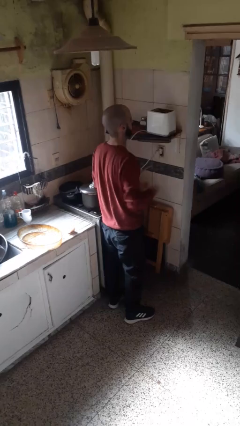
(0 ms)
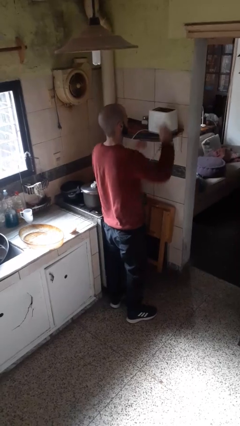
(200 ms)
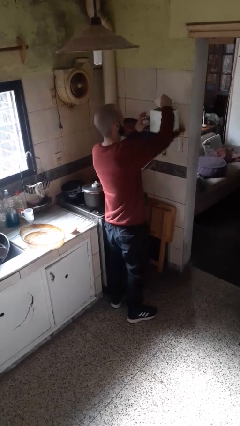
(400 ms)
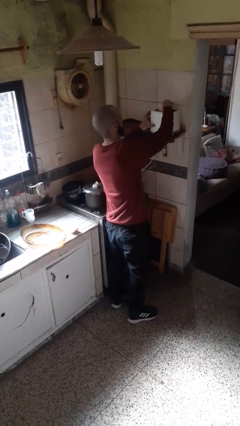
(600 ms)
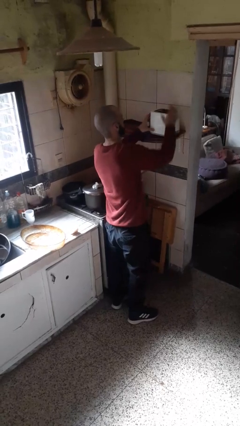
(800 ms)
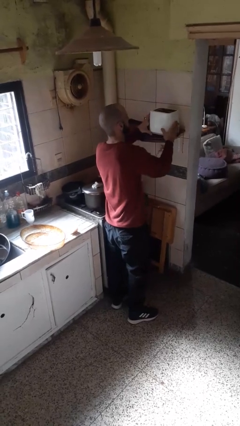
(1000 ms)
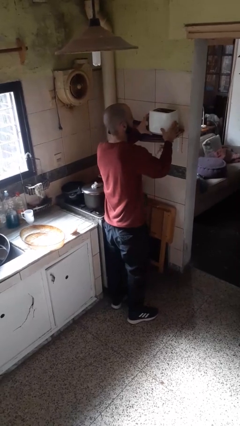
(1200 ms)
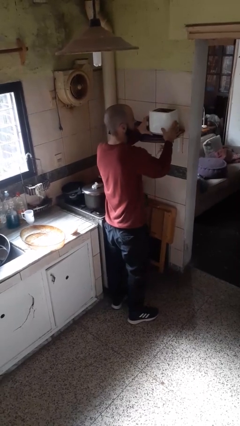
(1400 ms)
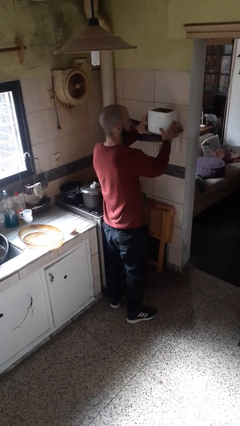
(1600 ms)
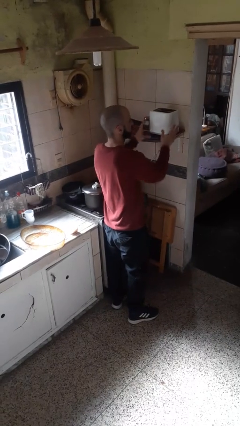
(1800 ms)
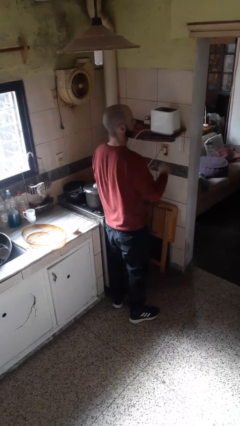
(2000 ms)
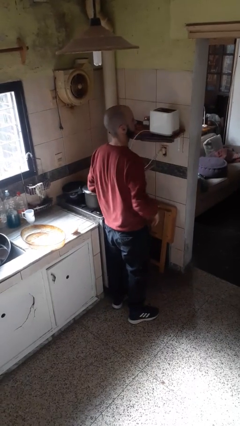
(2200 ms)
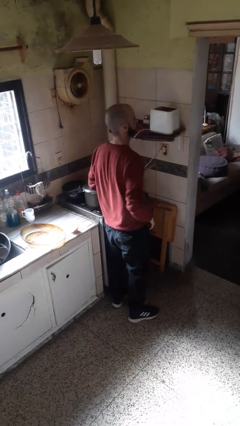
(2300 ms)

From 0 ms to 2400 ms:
person puts object into toaster

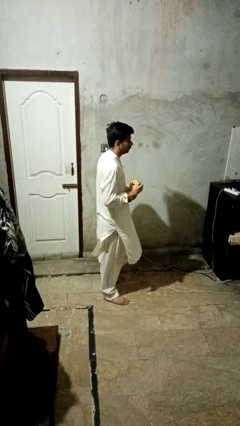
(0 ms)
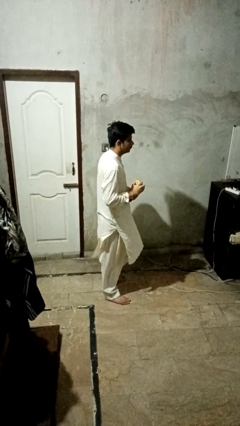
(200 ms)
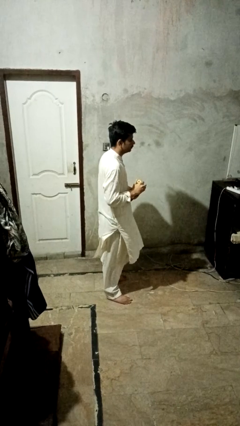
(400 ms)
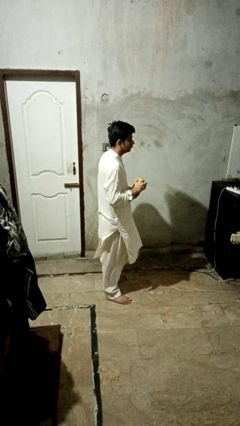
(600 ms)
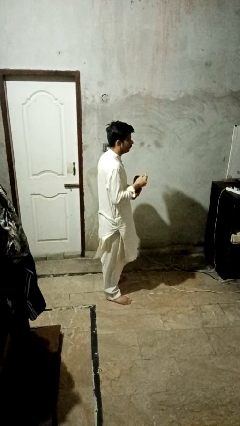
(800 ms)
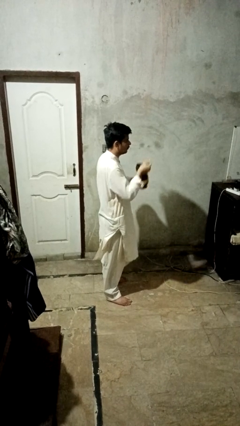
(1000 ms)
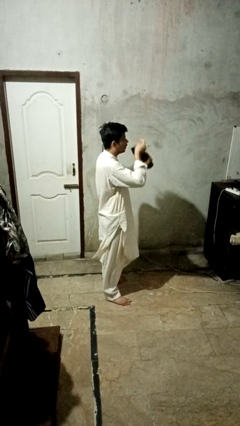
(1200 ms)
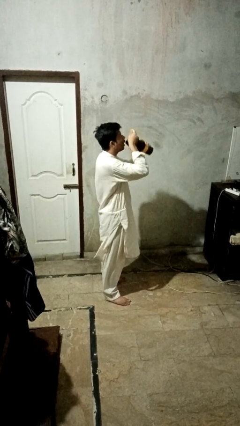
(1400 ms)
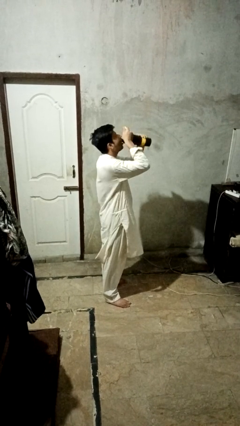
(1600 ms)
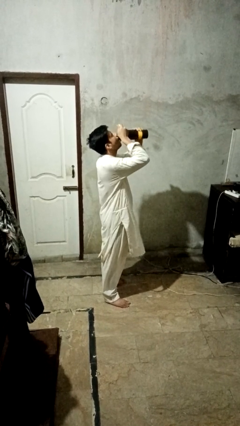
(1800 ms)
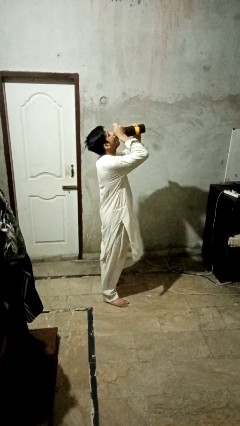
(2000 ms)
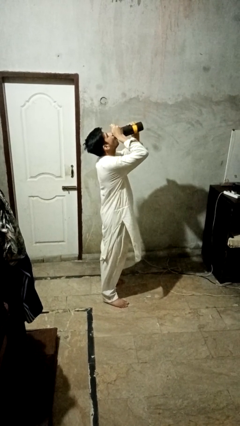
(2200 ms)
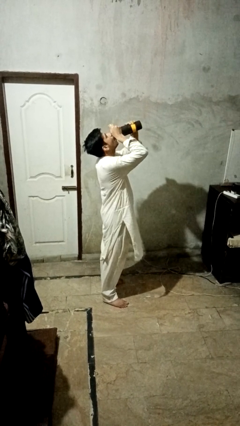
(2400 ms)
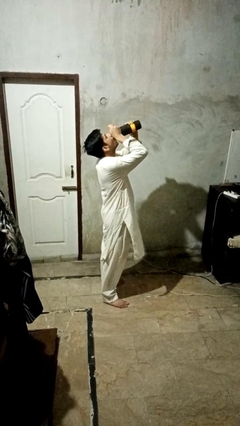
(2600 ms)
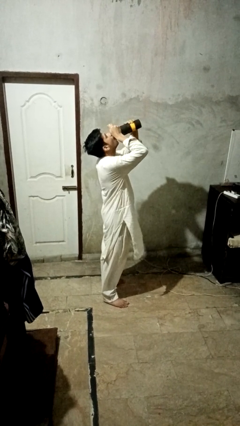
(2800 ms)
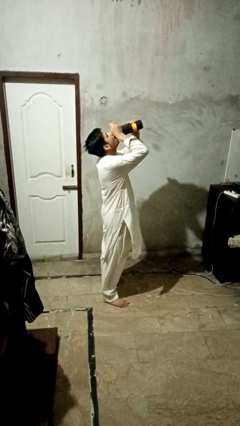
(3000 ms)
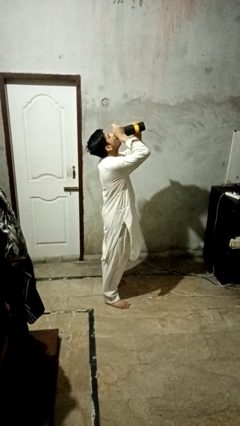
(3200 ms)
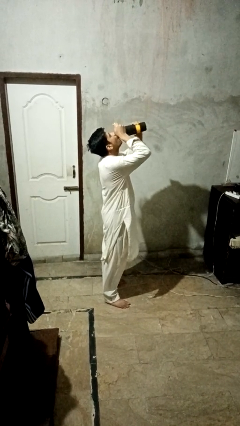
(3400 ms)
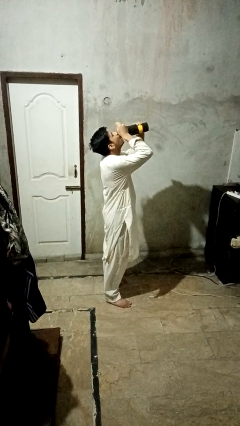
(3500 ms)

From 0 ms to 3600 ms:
person drinks from bottle

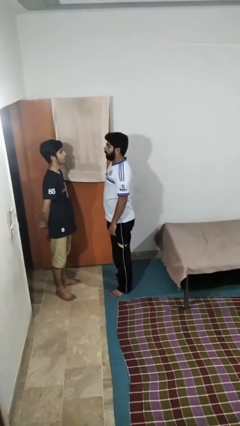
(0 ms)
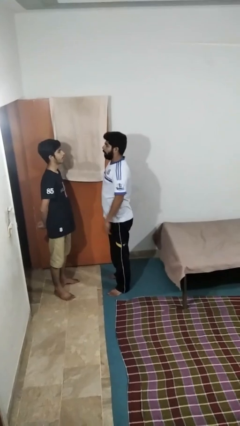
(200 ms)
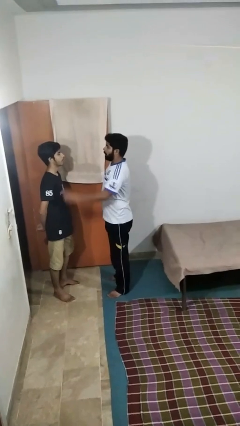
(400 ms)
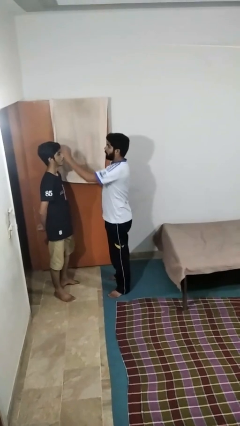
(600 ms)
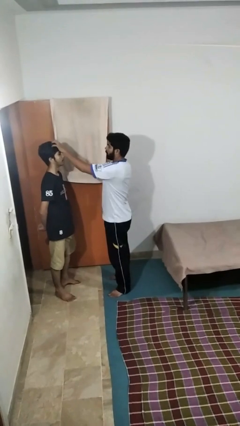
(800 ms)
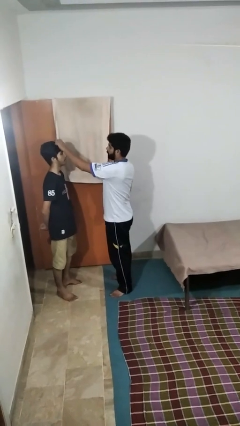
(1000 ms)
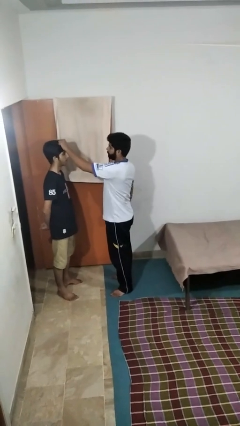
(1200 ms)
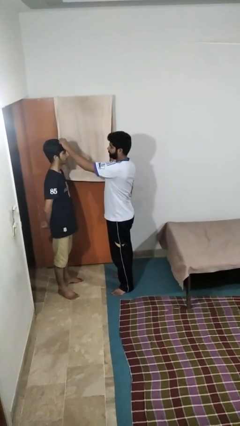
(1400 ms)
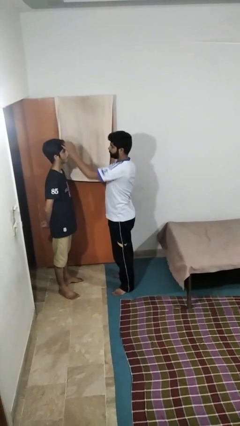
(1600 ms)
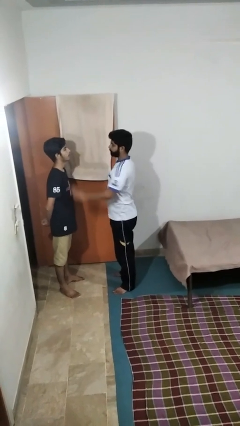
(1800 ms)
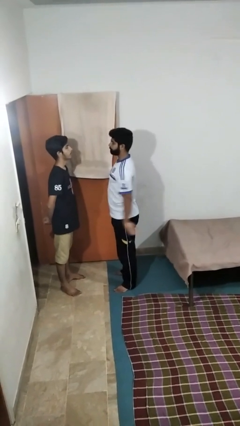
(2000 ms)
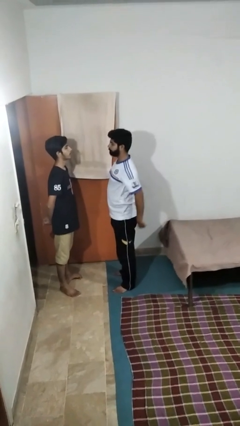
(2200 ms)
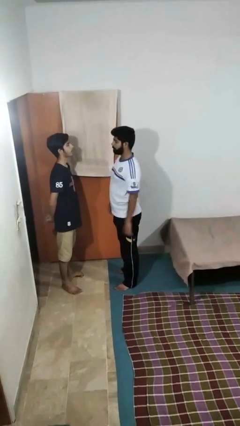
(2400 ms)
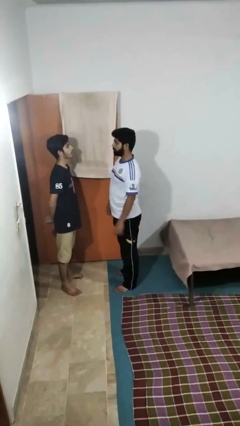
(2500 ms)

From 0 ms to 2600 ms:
person grabs person by hair

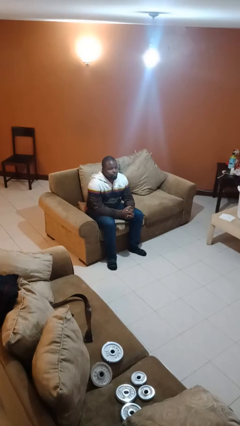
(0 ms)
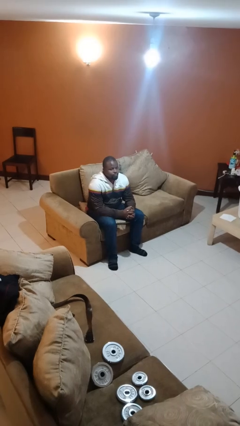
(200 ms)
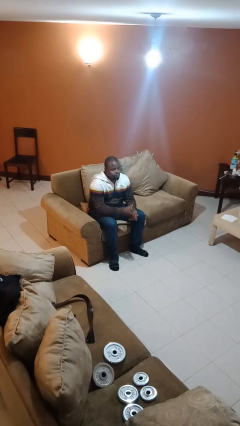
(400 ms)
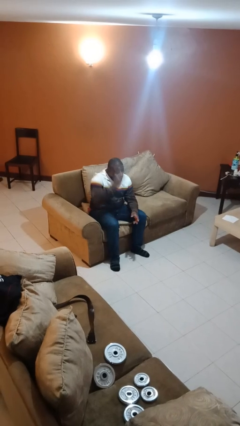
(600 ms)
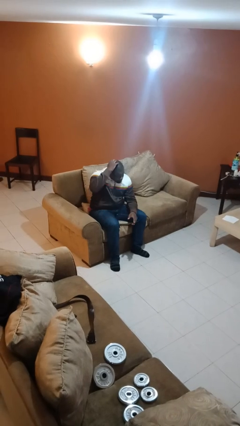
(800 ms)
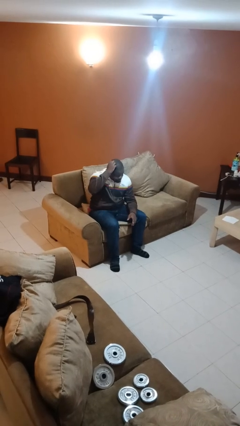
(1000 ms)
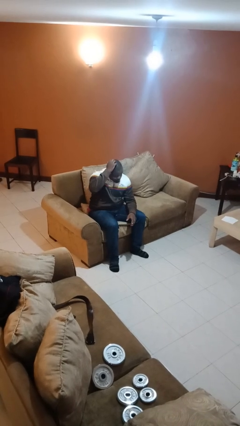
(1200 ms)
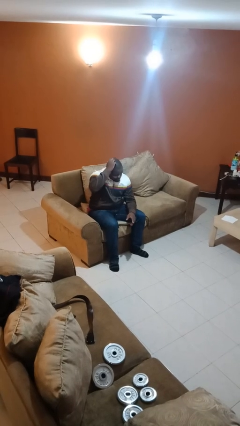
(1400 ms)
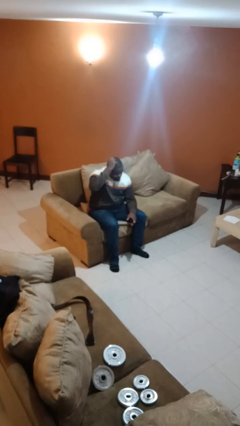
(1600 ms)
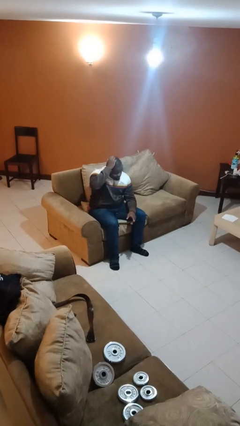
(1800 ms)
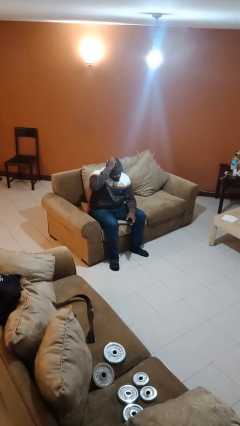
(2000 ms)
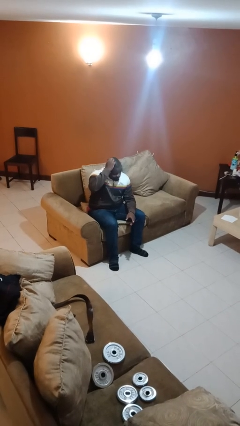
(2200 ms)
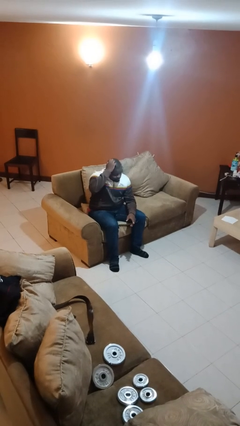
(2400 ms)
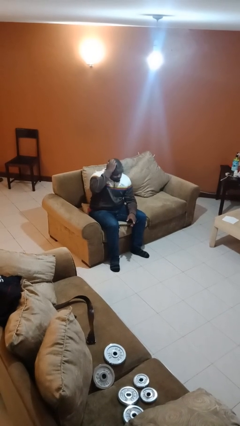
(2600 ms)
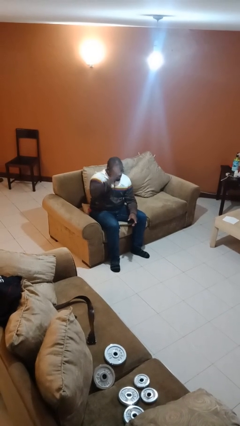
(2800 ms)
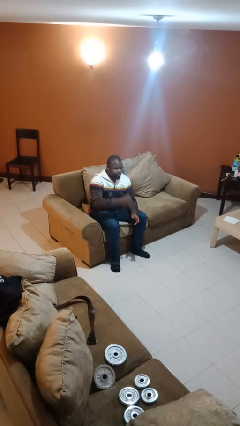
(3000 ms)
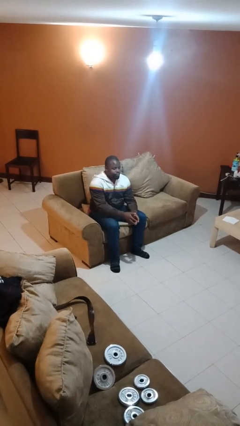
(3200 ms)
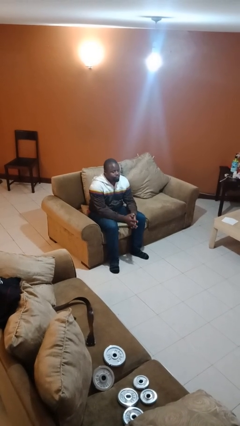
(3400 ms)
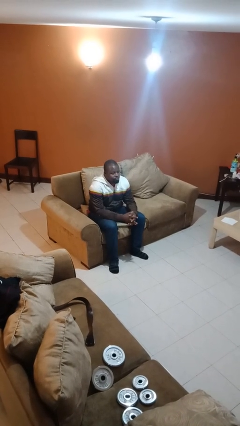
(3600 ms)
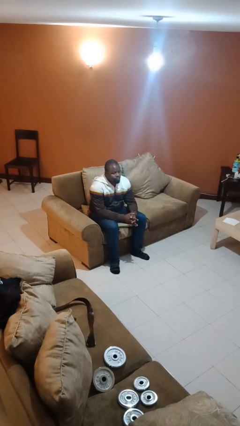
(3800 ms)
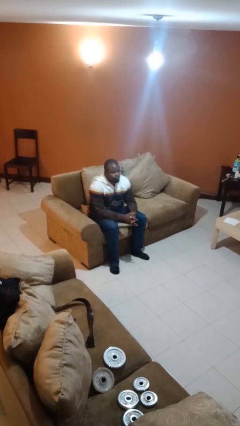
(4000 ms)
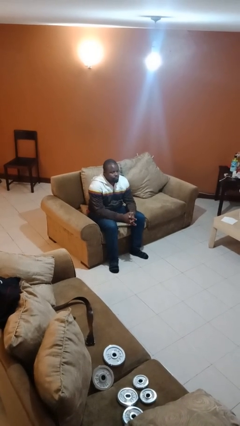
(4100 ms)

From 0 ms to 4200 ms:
person scratches face

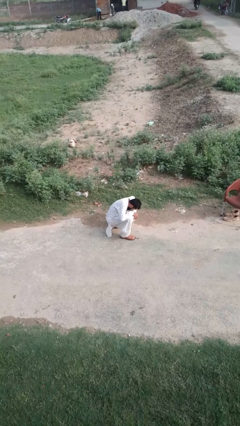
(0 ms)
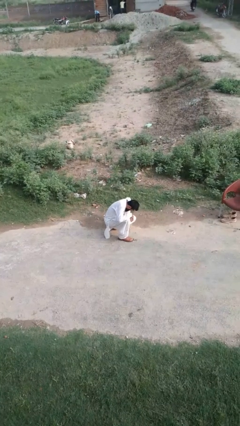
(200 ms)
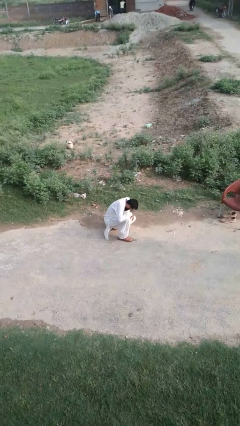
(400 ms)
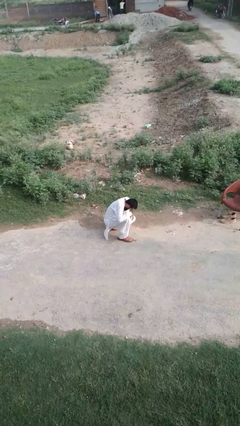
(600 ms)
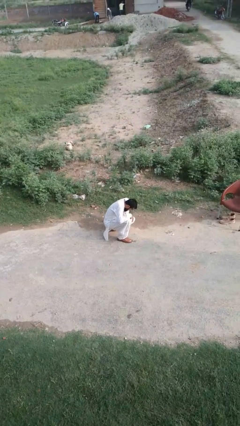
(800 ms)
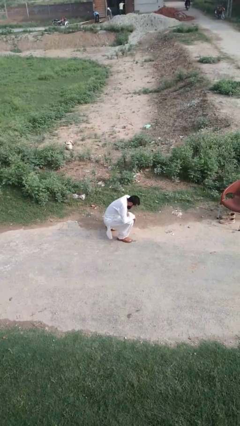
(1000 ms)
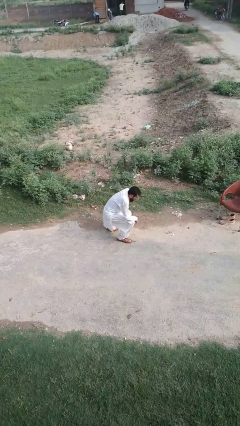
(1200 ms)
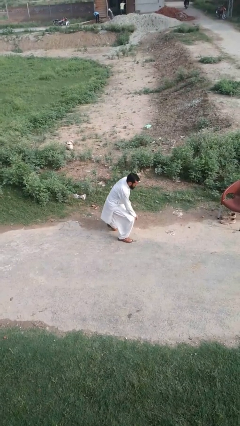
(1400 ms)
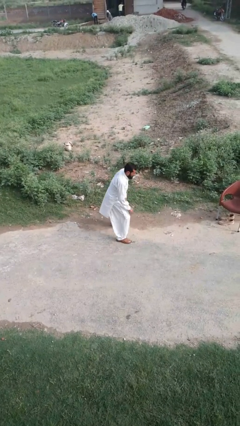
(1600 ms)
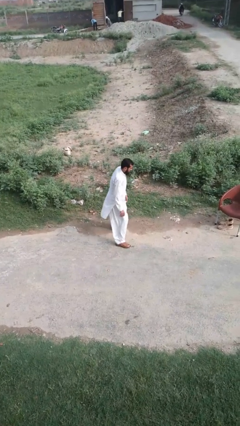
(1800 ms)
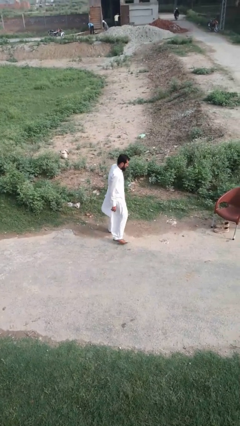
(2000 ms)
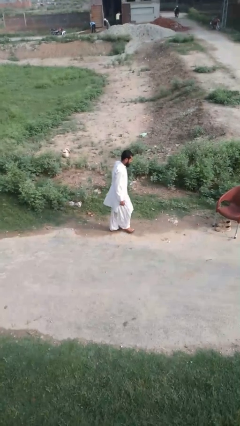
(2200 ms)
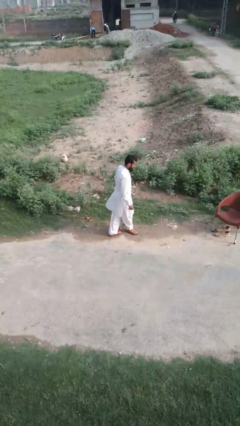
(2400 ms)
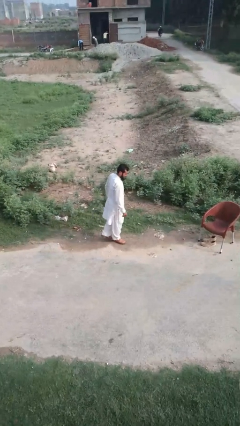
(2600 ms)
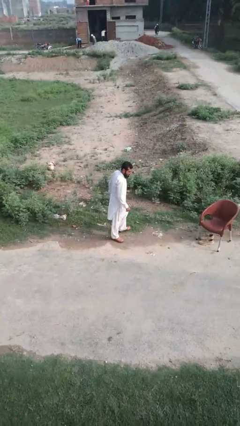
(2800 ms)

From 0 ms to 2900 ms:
person stands up from floor

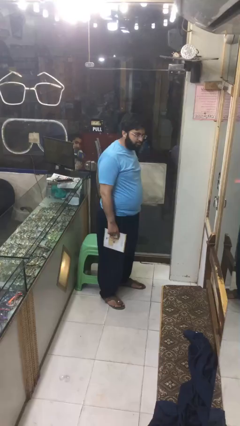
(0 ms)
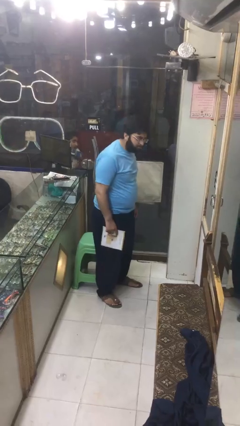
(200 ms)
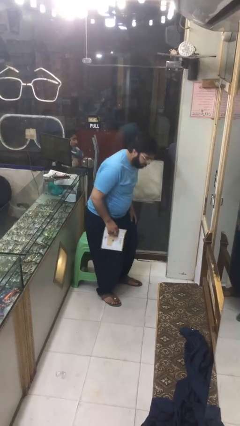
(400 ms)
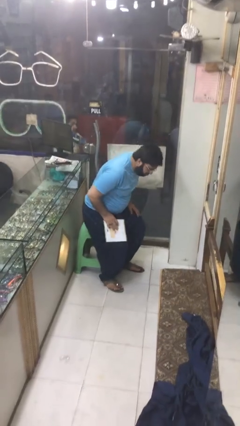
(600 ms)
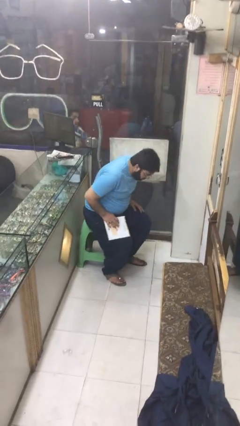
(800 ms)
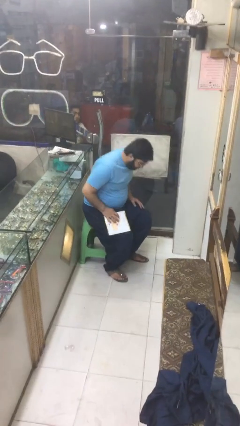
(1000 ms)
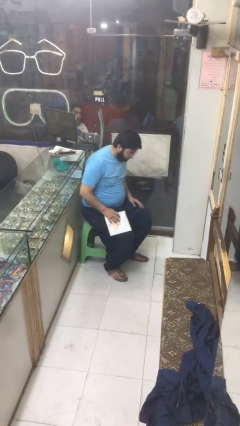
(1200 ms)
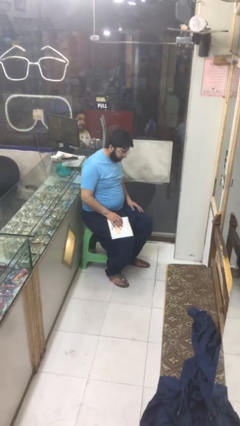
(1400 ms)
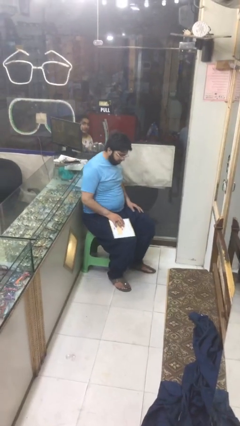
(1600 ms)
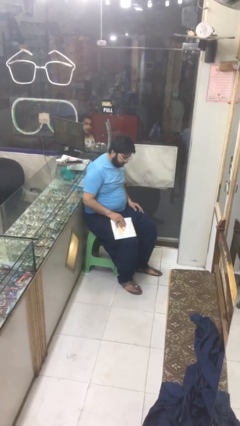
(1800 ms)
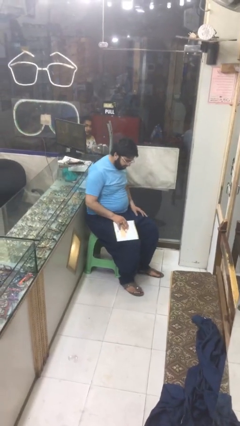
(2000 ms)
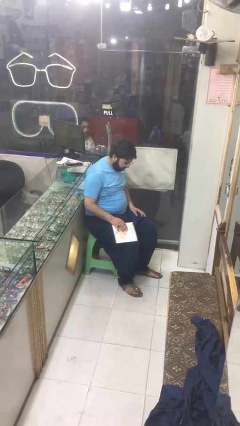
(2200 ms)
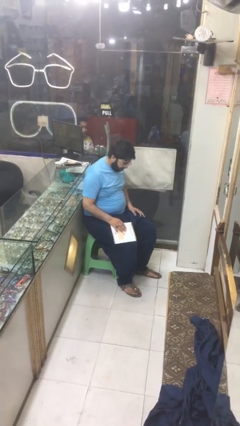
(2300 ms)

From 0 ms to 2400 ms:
person sits down
